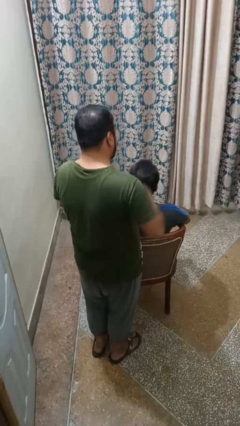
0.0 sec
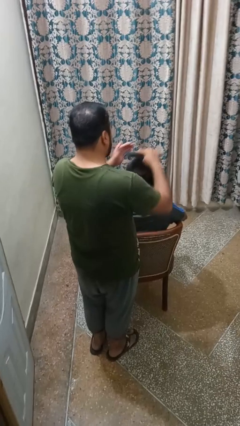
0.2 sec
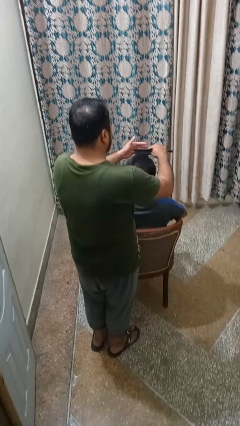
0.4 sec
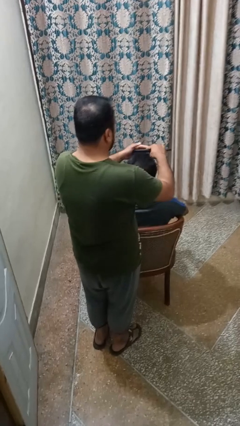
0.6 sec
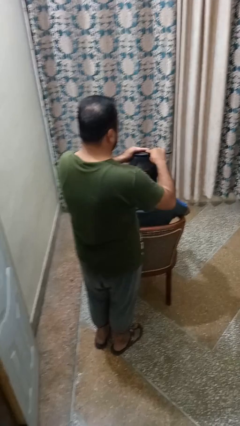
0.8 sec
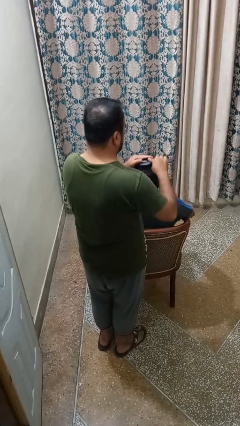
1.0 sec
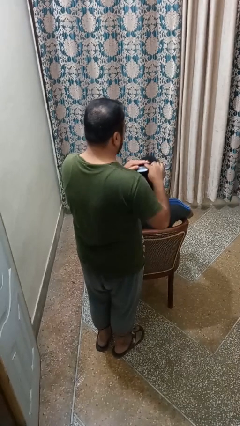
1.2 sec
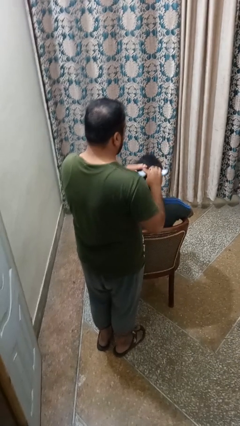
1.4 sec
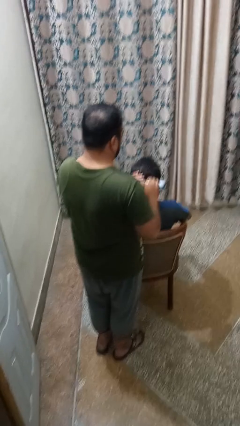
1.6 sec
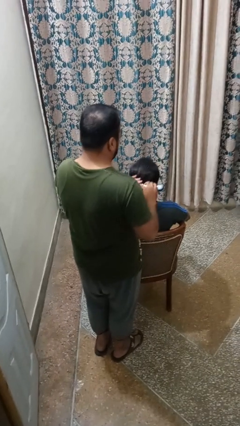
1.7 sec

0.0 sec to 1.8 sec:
person brushes hair of person

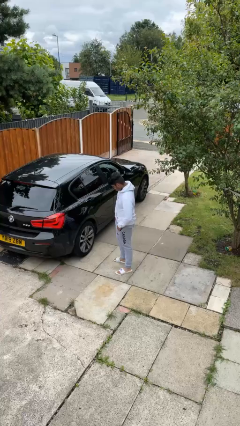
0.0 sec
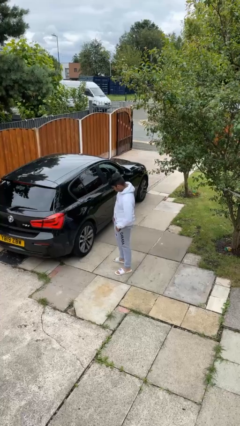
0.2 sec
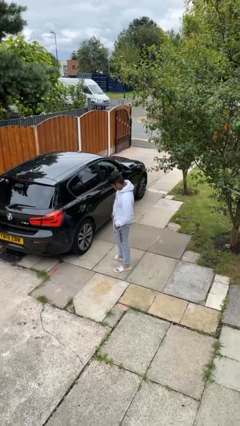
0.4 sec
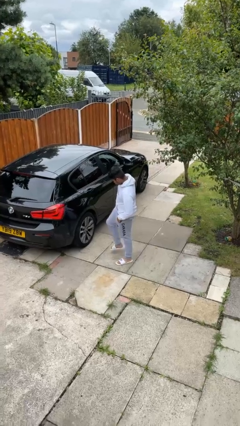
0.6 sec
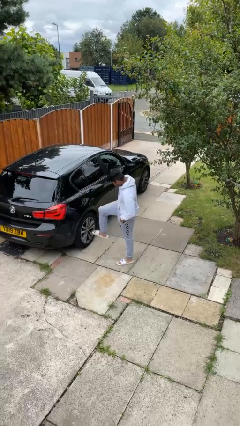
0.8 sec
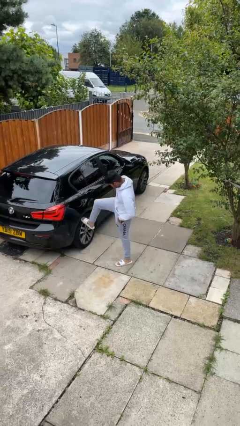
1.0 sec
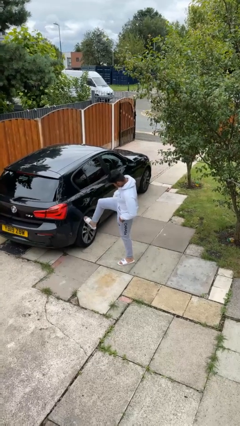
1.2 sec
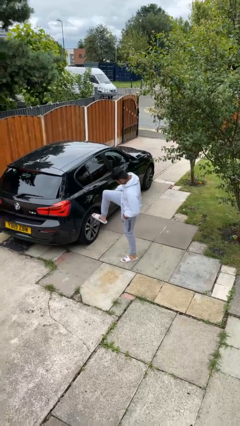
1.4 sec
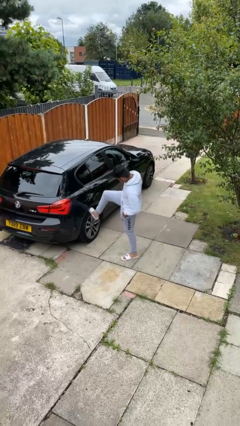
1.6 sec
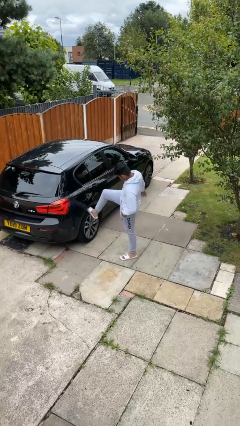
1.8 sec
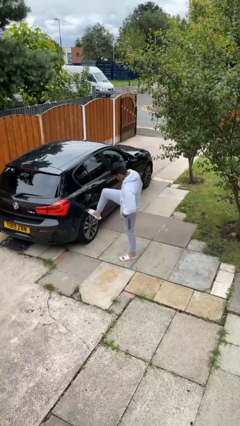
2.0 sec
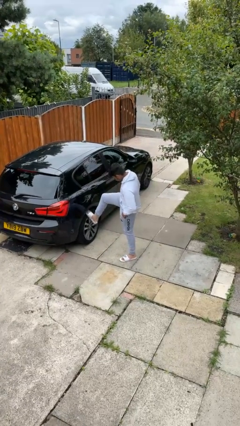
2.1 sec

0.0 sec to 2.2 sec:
person kicks car tires

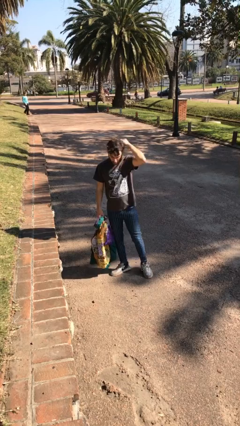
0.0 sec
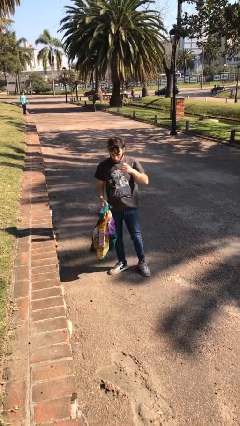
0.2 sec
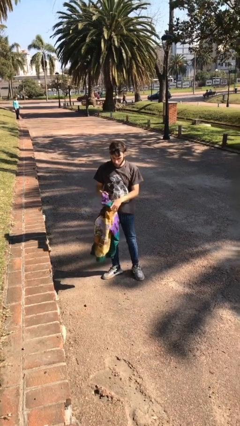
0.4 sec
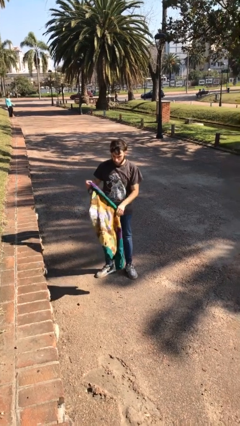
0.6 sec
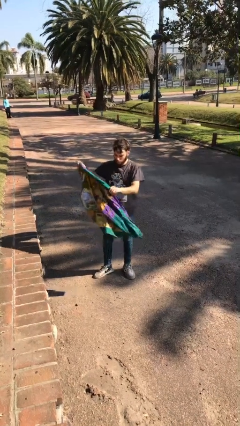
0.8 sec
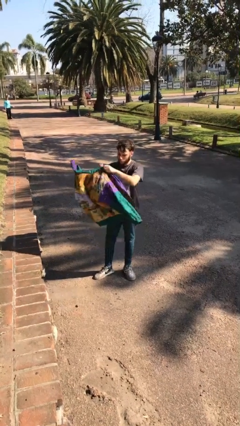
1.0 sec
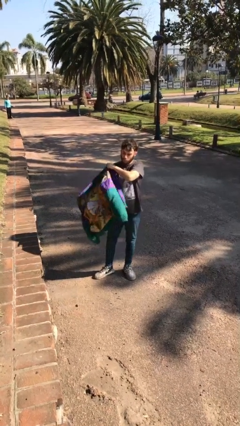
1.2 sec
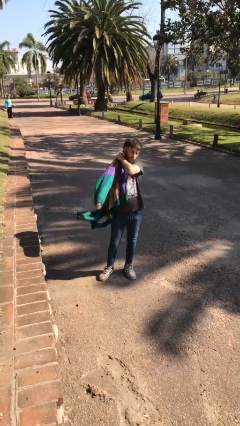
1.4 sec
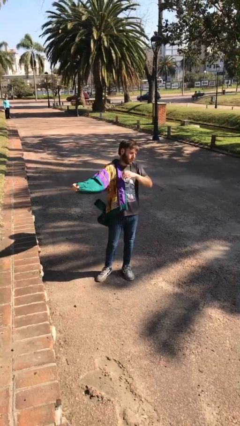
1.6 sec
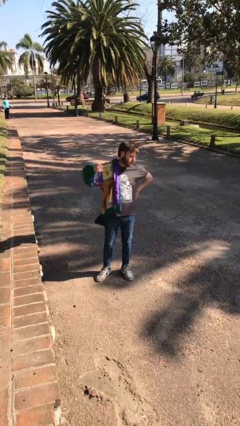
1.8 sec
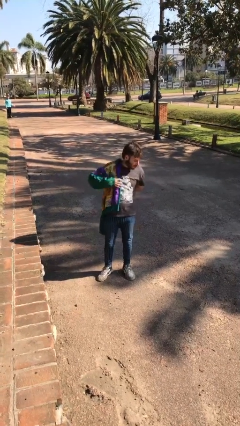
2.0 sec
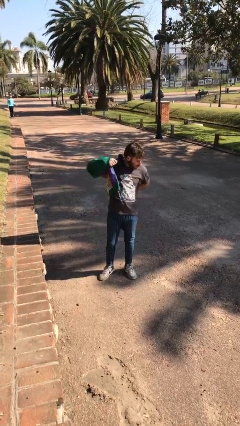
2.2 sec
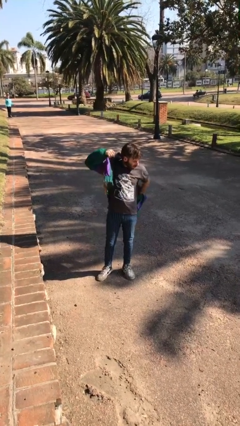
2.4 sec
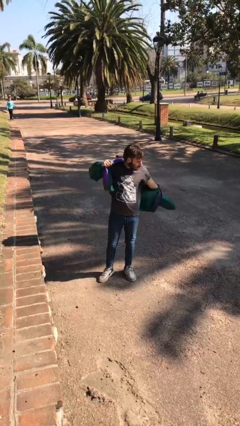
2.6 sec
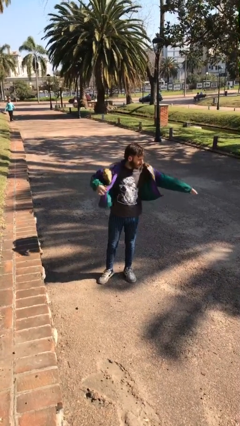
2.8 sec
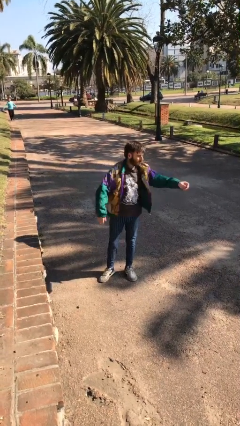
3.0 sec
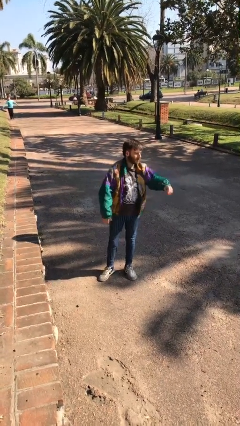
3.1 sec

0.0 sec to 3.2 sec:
person puts on jacket

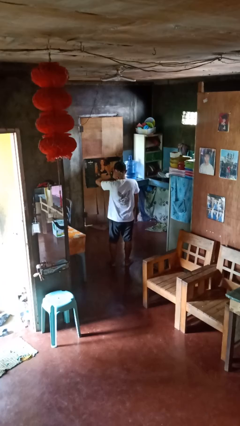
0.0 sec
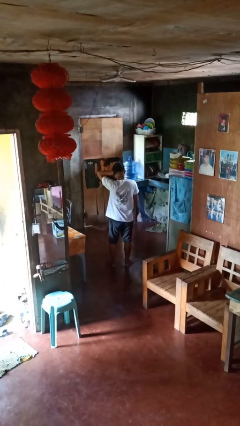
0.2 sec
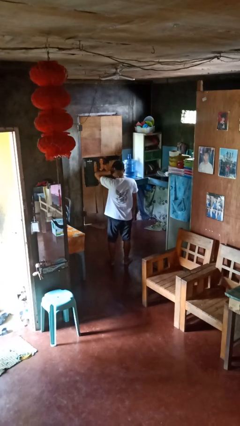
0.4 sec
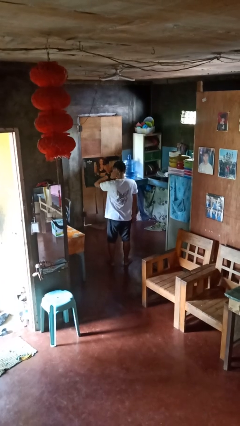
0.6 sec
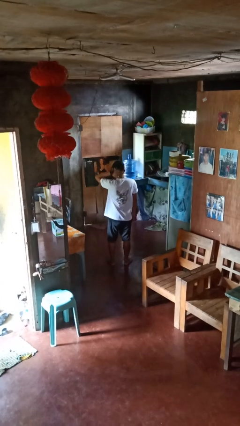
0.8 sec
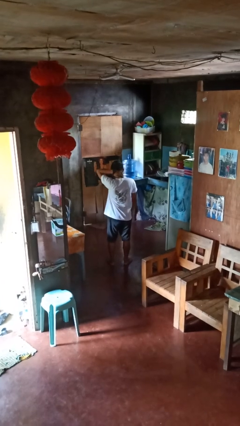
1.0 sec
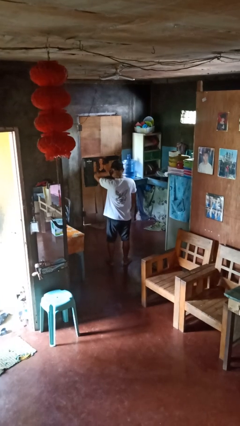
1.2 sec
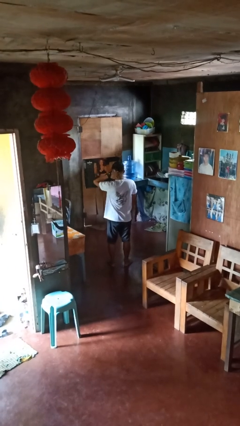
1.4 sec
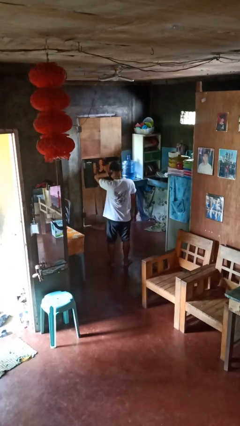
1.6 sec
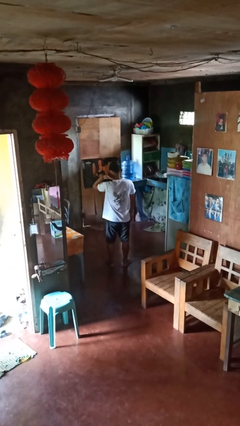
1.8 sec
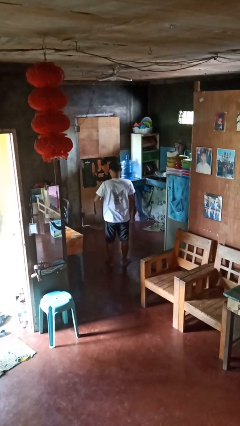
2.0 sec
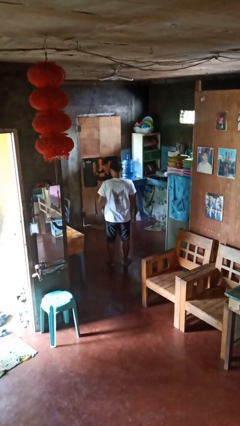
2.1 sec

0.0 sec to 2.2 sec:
person rubs neck

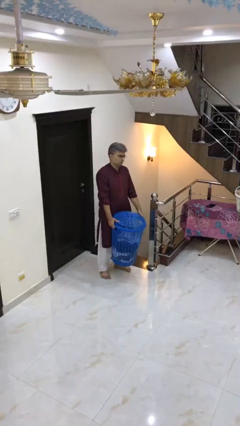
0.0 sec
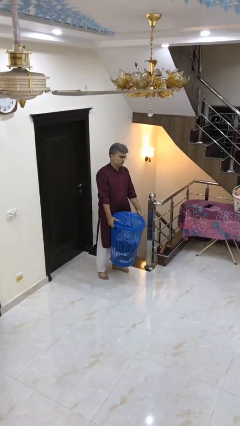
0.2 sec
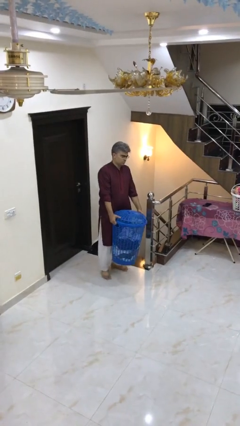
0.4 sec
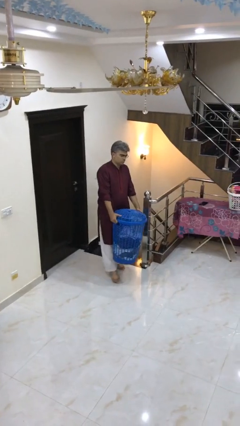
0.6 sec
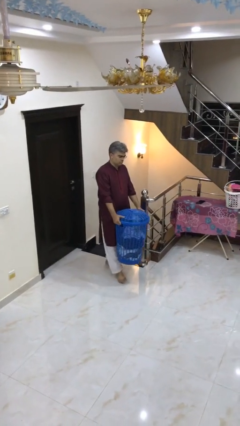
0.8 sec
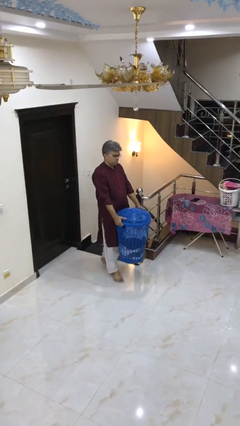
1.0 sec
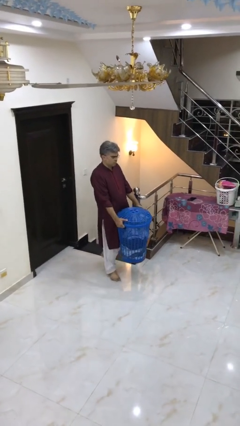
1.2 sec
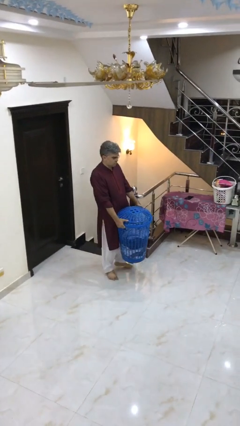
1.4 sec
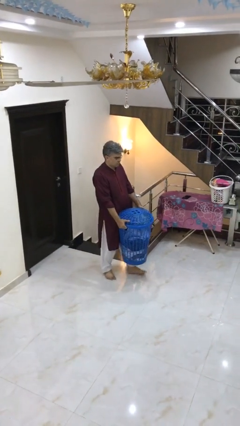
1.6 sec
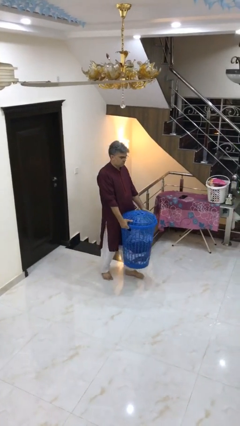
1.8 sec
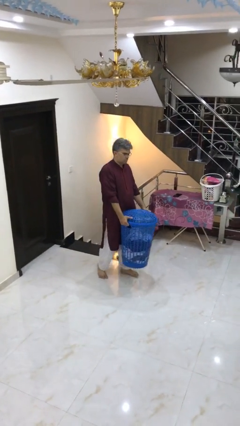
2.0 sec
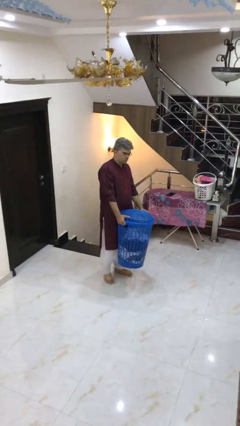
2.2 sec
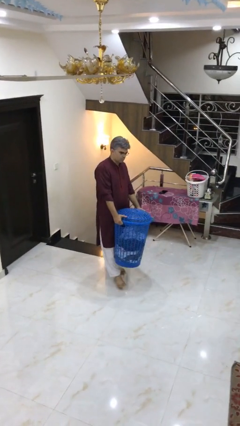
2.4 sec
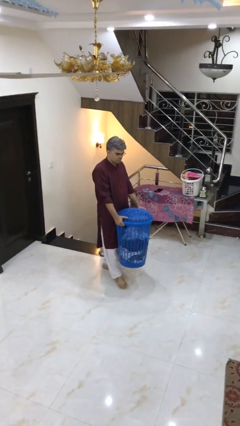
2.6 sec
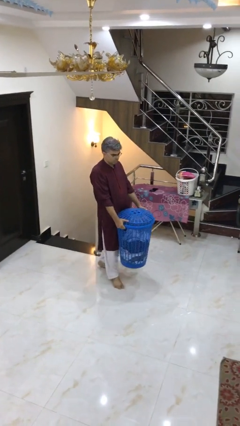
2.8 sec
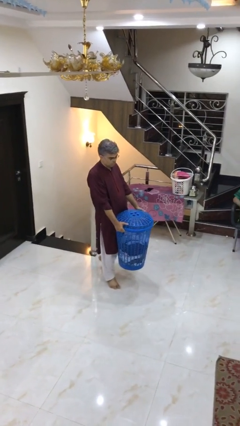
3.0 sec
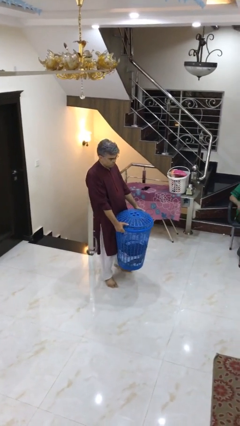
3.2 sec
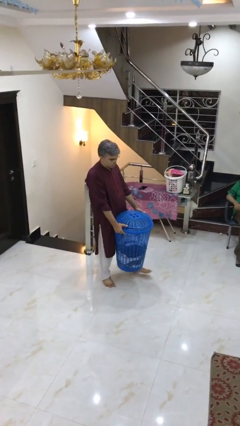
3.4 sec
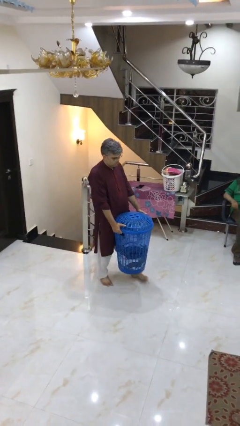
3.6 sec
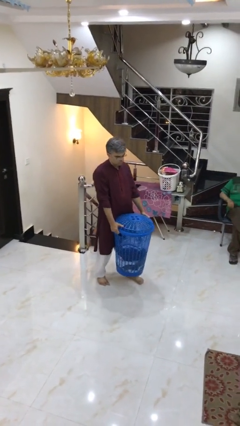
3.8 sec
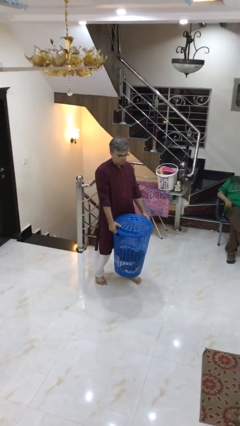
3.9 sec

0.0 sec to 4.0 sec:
person carries heavy object

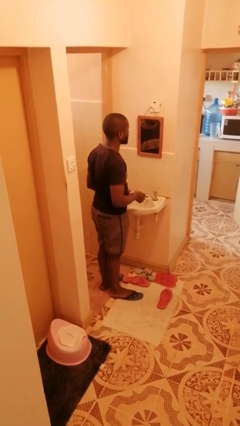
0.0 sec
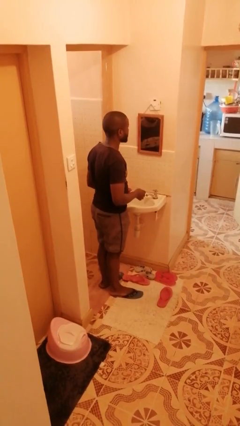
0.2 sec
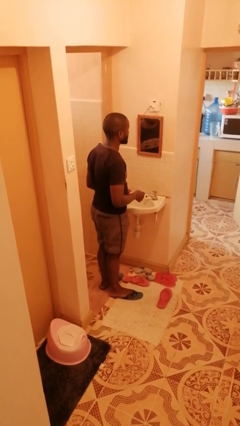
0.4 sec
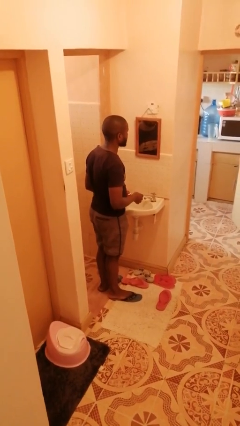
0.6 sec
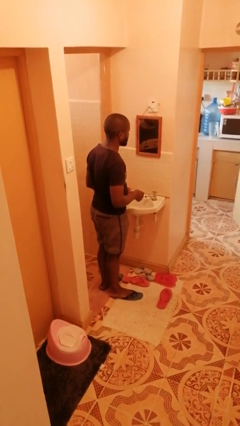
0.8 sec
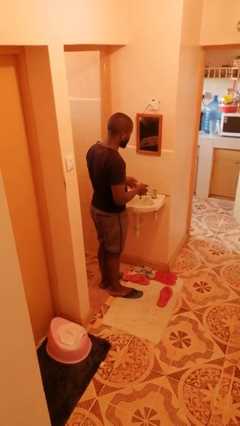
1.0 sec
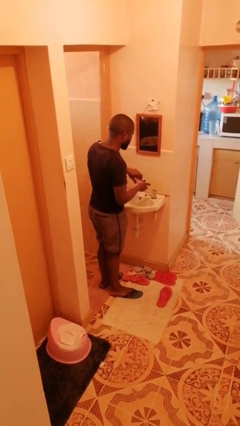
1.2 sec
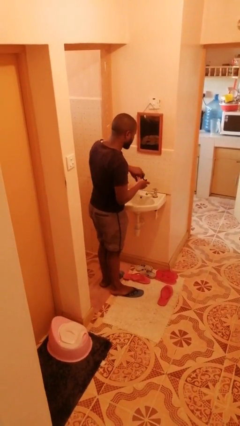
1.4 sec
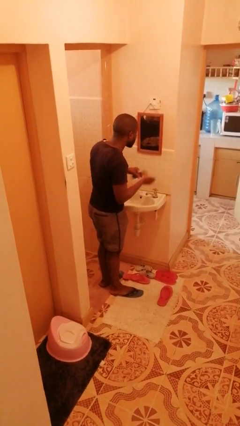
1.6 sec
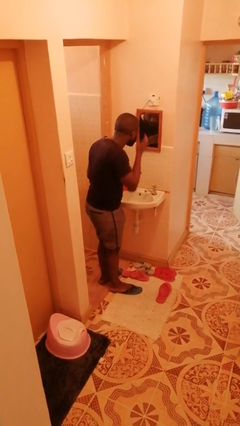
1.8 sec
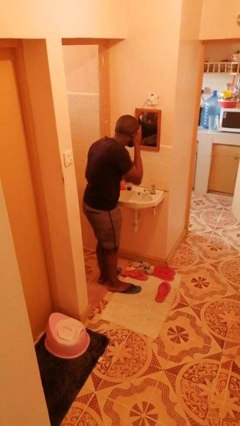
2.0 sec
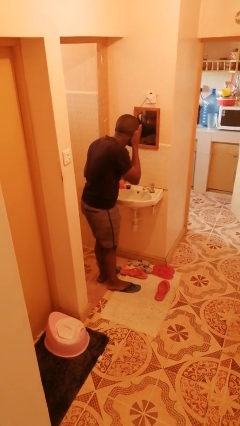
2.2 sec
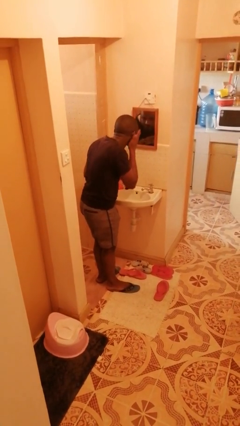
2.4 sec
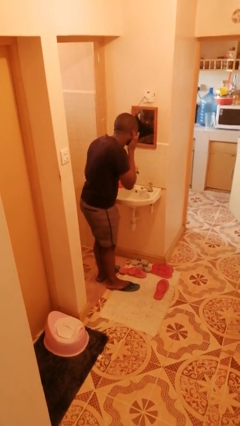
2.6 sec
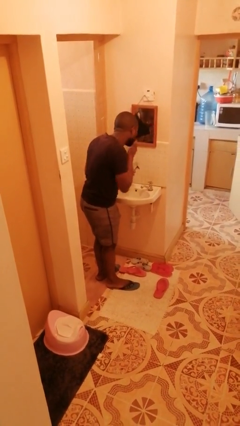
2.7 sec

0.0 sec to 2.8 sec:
person applies shaving cream

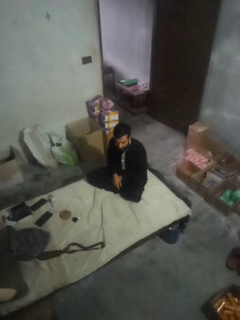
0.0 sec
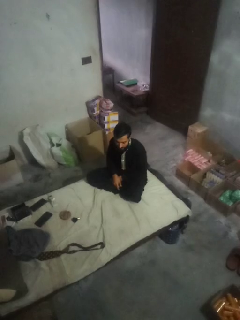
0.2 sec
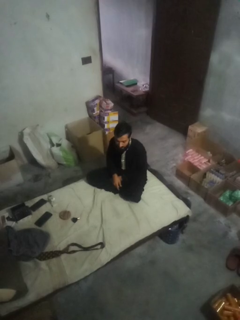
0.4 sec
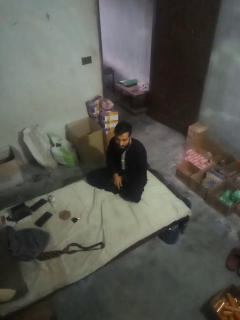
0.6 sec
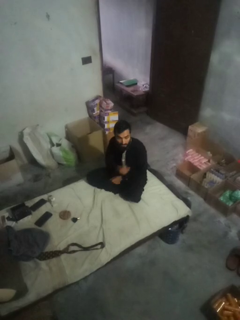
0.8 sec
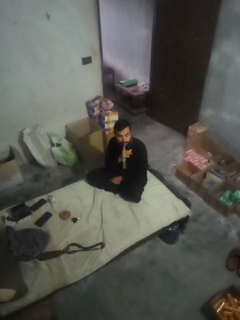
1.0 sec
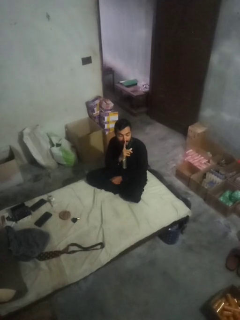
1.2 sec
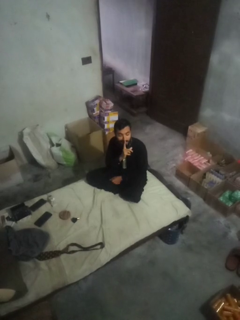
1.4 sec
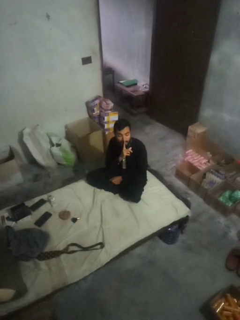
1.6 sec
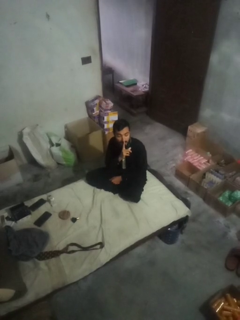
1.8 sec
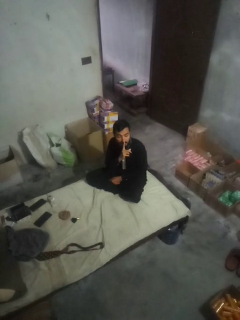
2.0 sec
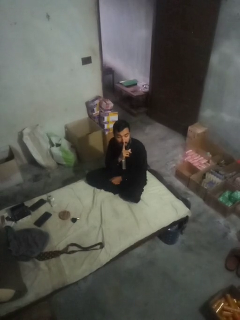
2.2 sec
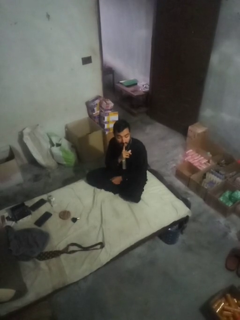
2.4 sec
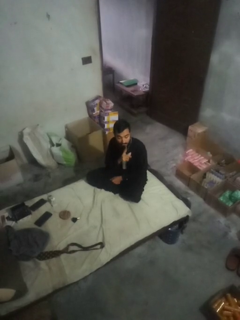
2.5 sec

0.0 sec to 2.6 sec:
person gestures be quiet
